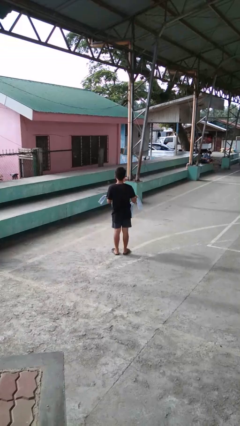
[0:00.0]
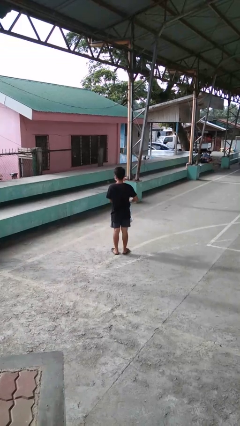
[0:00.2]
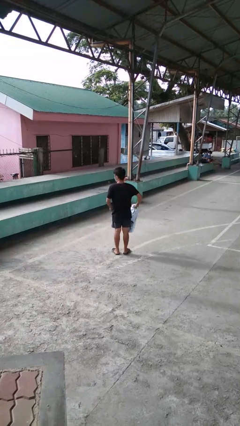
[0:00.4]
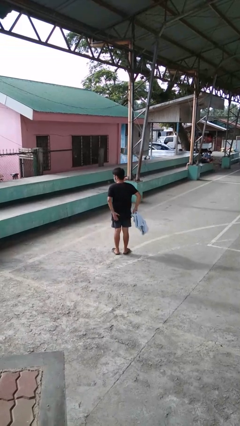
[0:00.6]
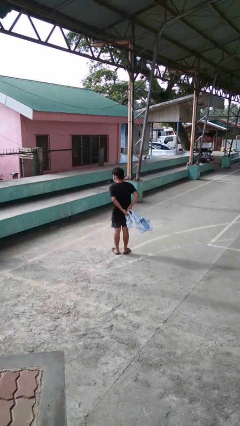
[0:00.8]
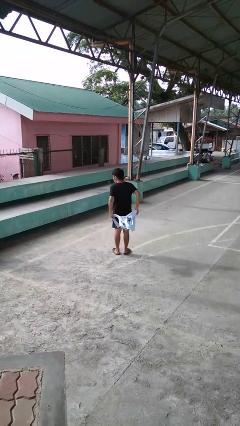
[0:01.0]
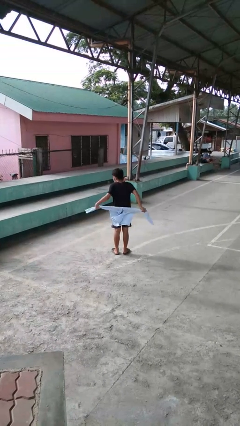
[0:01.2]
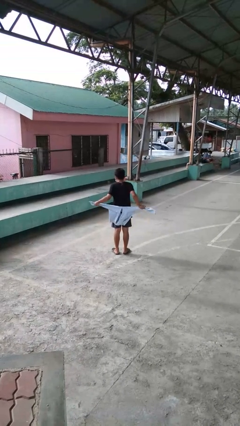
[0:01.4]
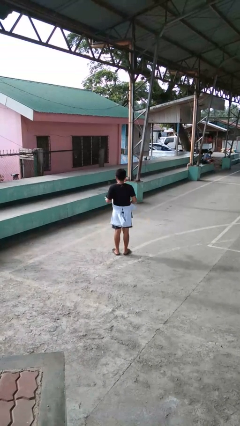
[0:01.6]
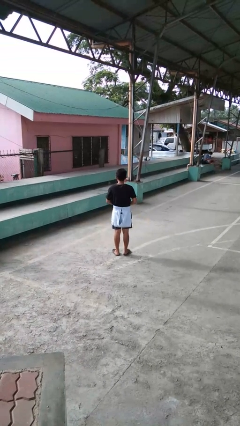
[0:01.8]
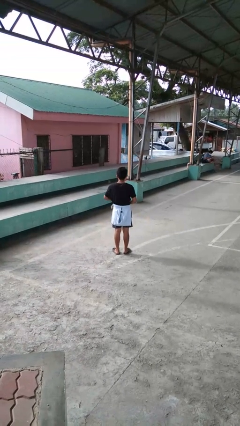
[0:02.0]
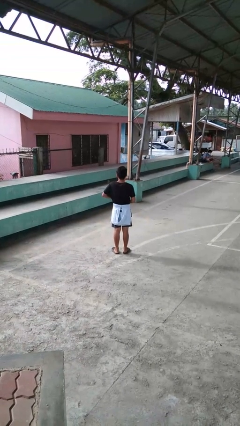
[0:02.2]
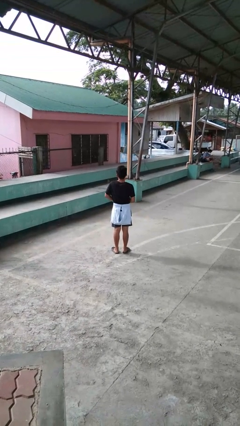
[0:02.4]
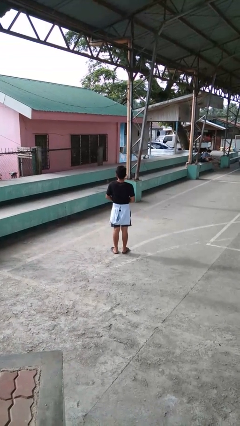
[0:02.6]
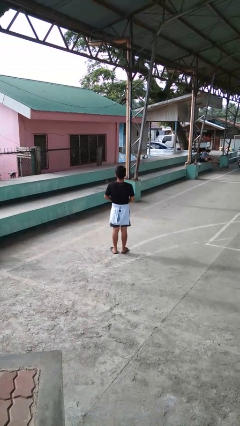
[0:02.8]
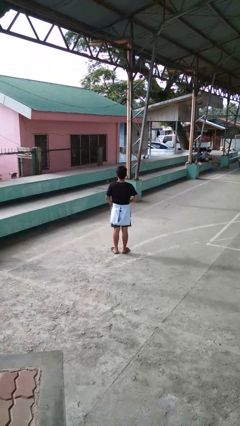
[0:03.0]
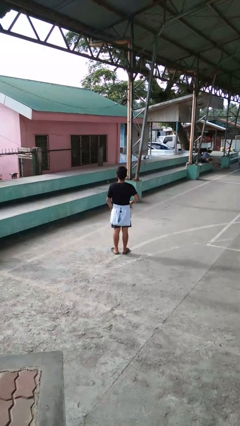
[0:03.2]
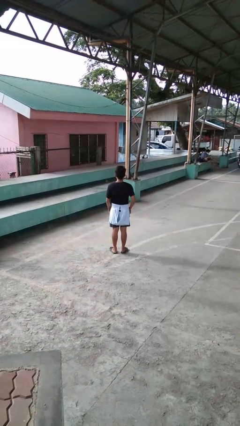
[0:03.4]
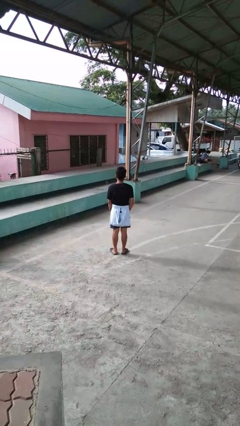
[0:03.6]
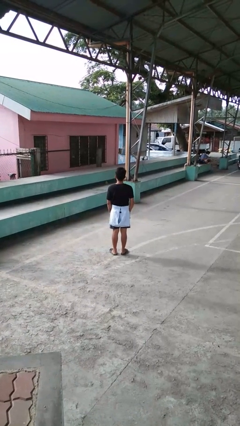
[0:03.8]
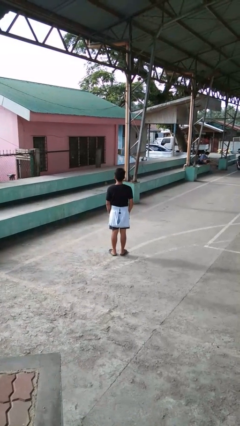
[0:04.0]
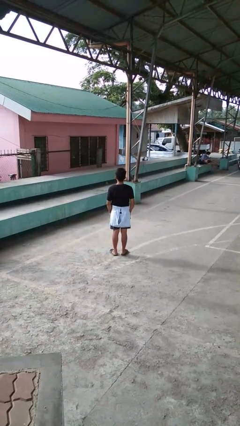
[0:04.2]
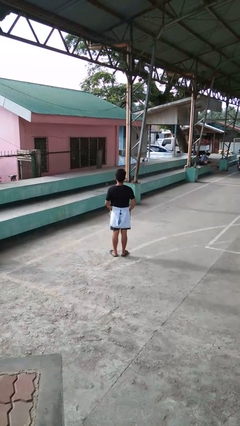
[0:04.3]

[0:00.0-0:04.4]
person ties jacket around waist

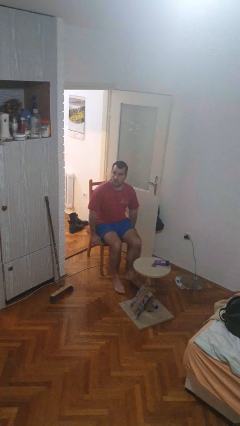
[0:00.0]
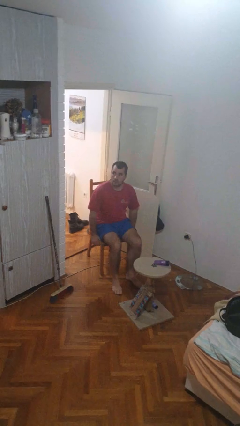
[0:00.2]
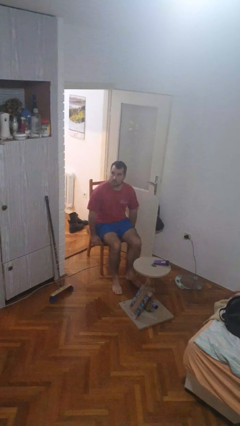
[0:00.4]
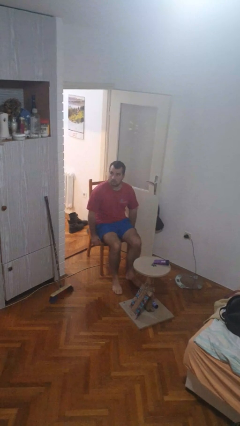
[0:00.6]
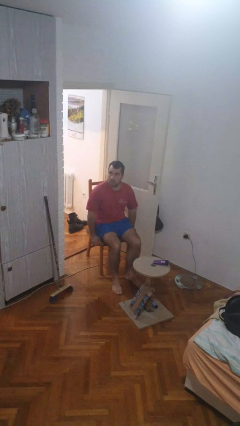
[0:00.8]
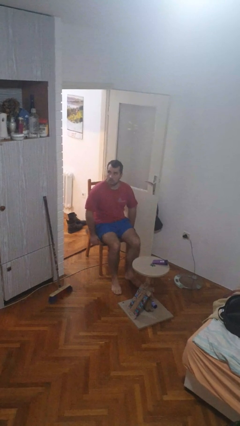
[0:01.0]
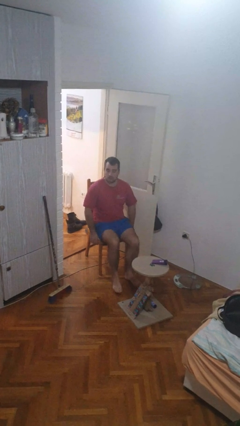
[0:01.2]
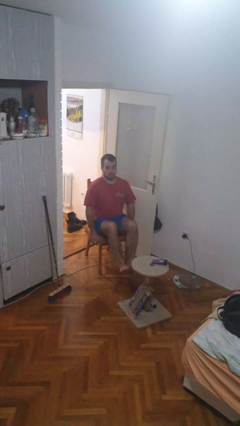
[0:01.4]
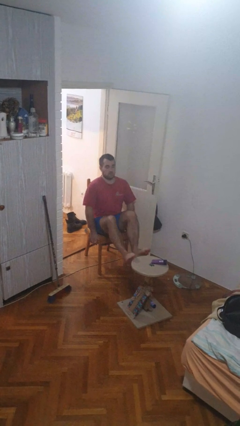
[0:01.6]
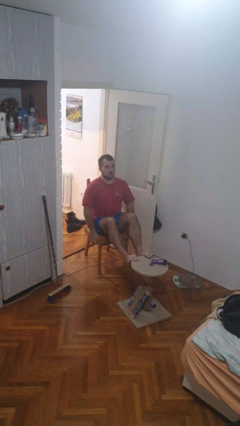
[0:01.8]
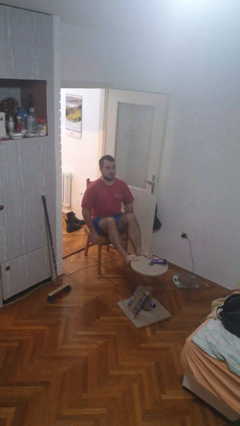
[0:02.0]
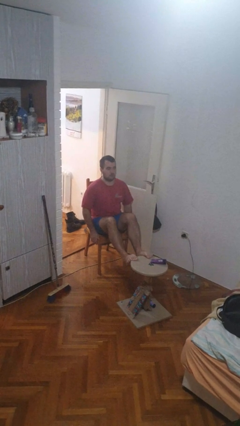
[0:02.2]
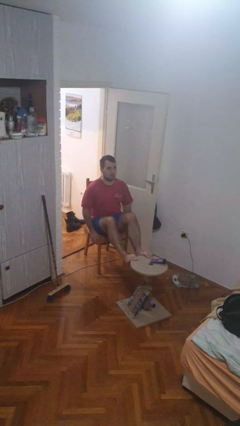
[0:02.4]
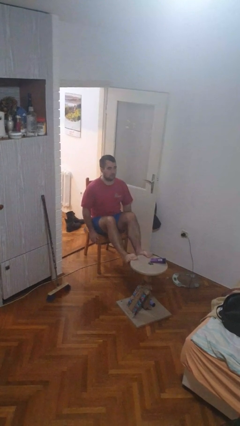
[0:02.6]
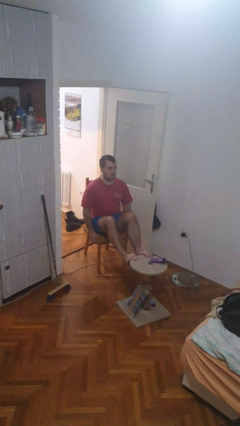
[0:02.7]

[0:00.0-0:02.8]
person puts feet up

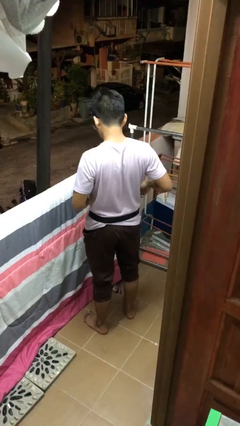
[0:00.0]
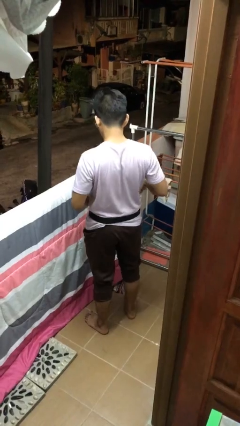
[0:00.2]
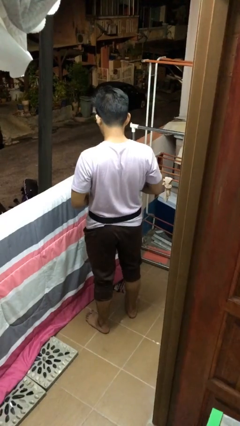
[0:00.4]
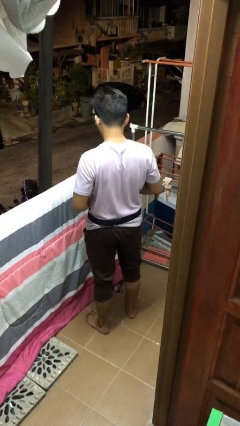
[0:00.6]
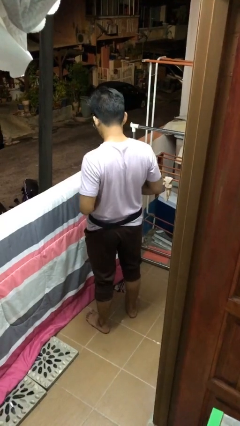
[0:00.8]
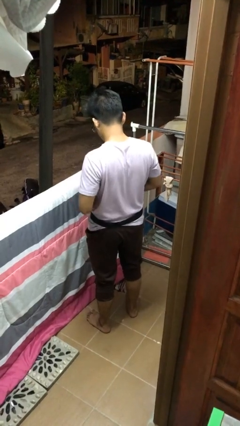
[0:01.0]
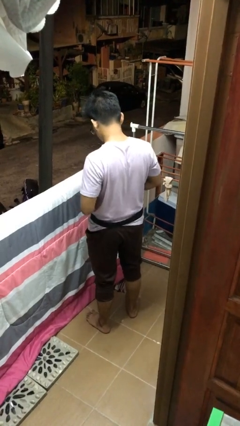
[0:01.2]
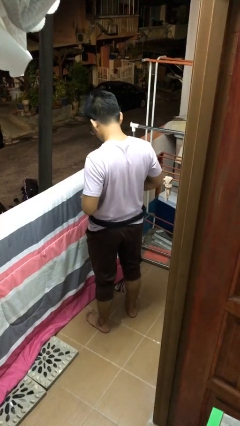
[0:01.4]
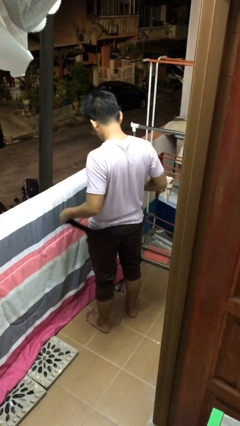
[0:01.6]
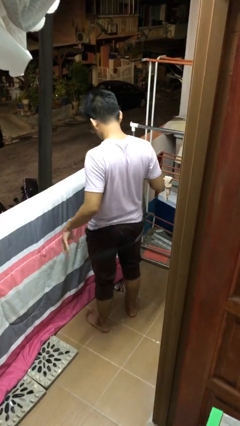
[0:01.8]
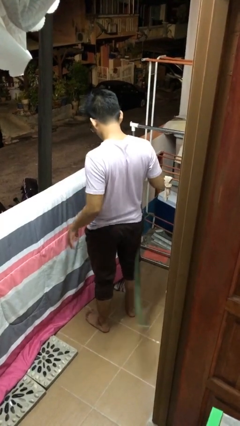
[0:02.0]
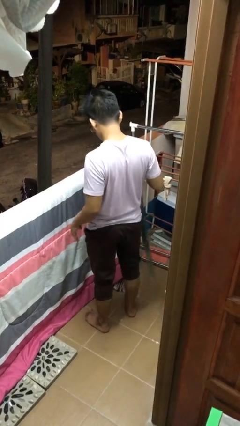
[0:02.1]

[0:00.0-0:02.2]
person takes off belt

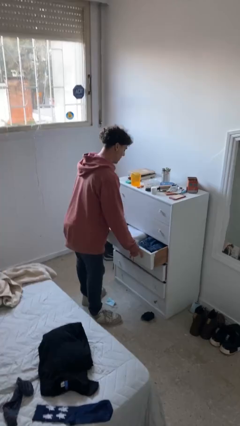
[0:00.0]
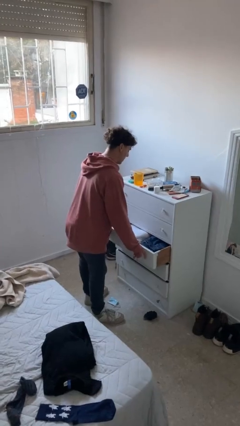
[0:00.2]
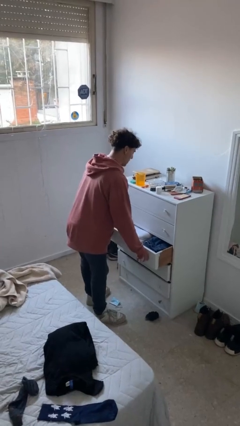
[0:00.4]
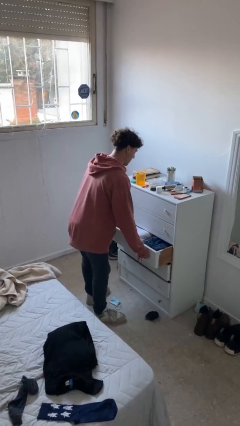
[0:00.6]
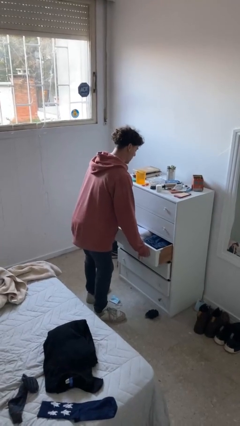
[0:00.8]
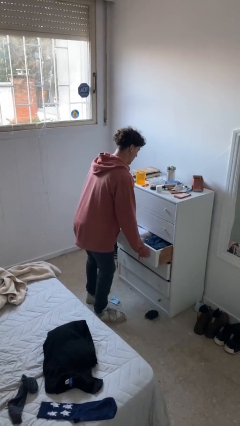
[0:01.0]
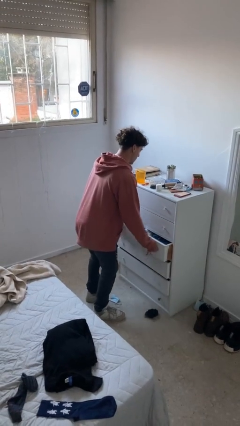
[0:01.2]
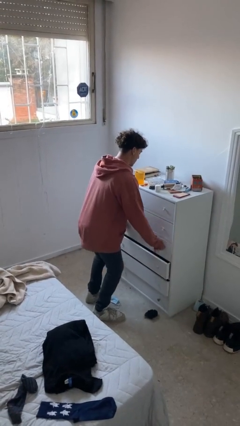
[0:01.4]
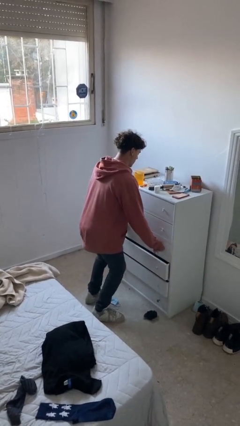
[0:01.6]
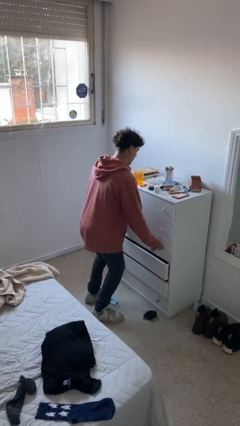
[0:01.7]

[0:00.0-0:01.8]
person closes dresser drawer

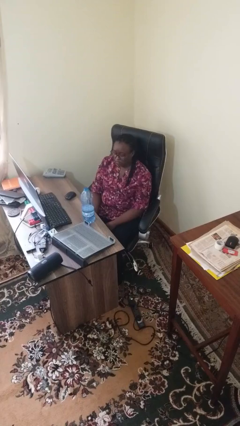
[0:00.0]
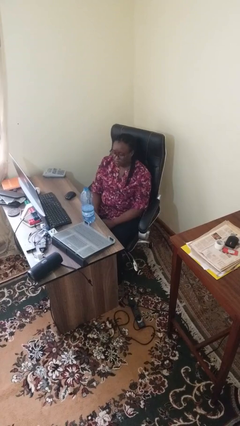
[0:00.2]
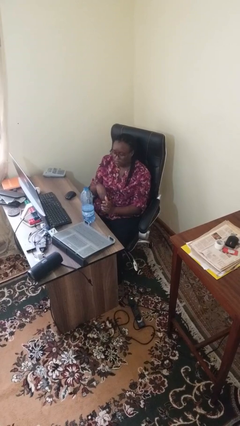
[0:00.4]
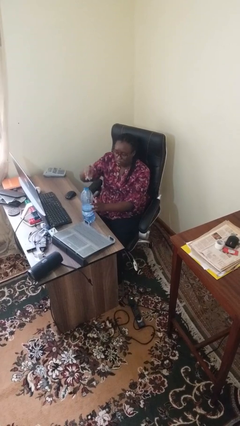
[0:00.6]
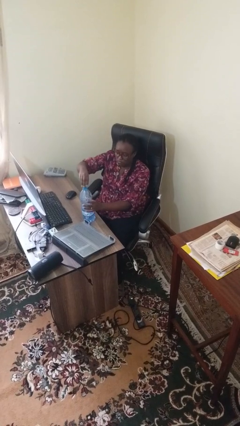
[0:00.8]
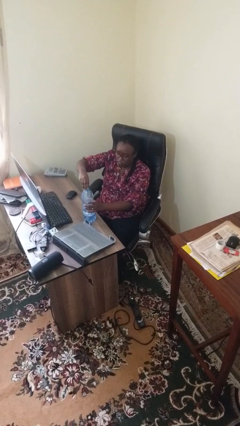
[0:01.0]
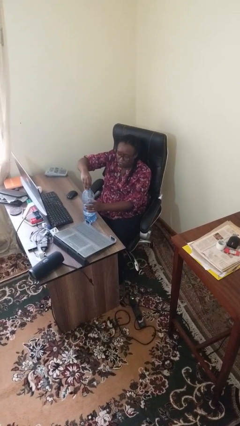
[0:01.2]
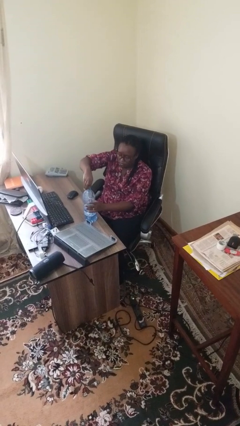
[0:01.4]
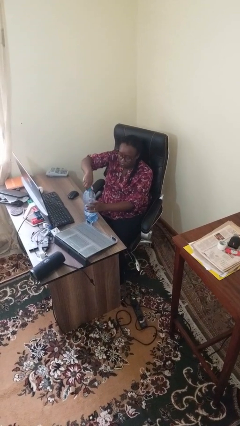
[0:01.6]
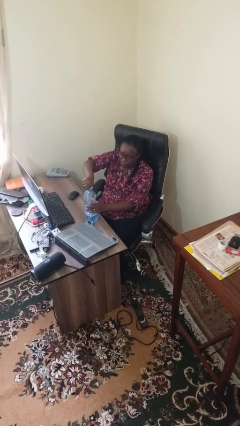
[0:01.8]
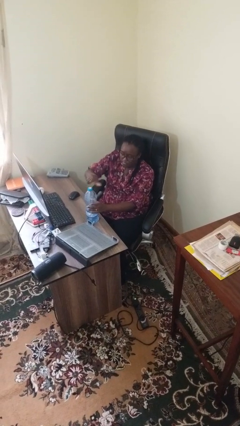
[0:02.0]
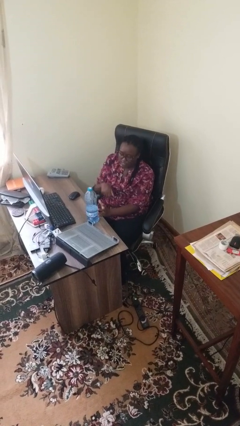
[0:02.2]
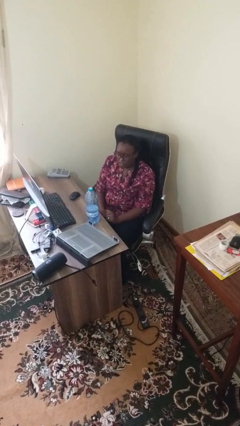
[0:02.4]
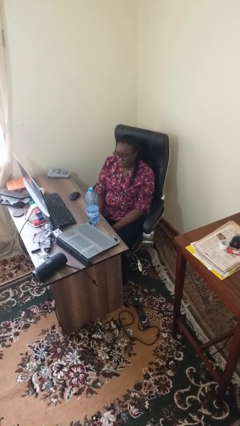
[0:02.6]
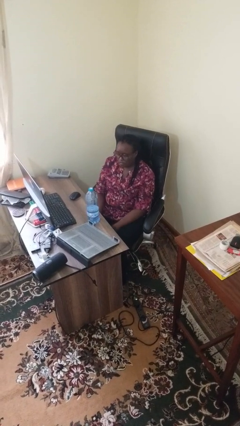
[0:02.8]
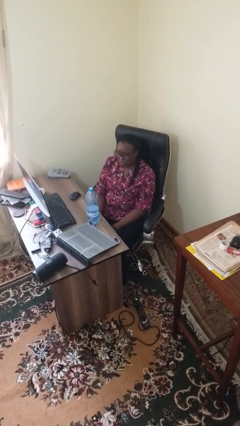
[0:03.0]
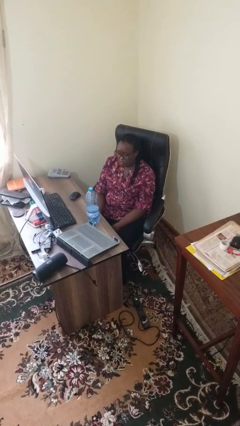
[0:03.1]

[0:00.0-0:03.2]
person screws lid to bottle

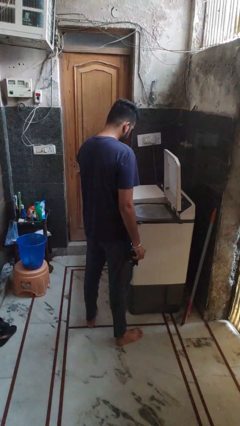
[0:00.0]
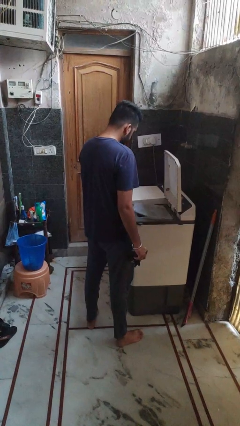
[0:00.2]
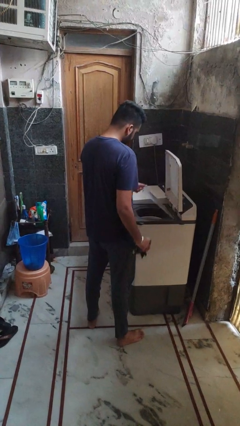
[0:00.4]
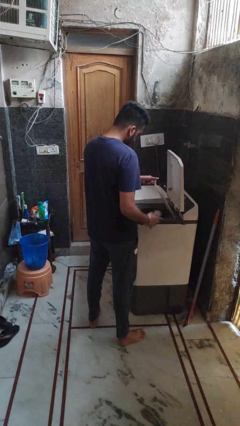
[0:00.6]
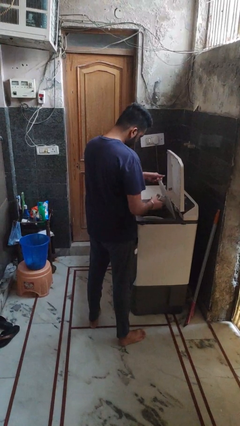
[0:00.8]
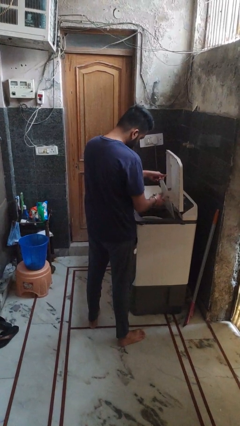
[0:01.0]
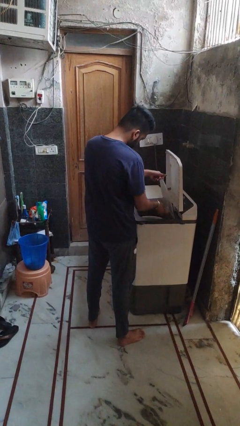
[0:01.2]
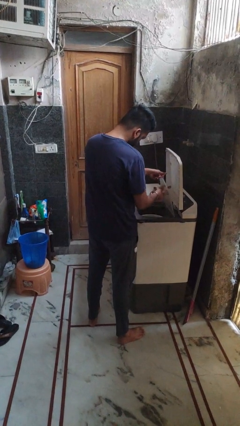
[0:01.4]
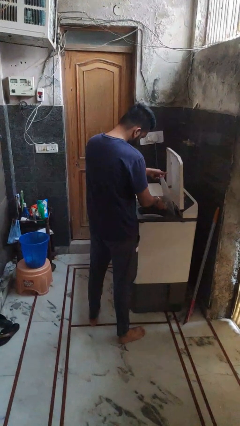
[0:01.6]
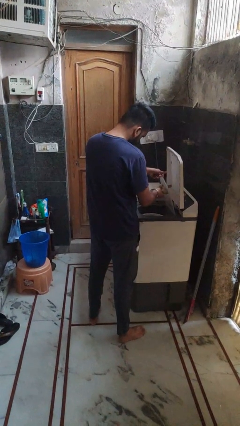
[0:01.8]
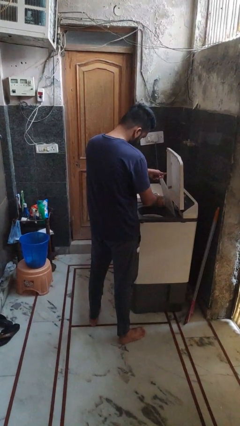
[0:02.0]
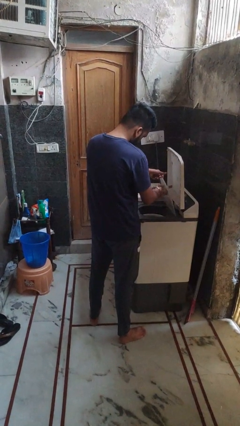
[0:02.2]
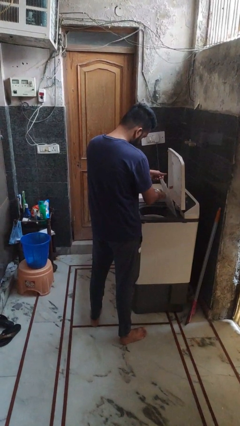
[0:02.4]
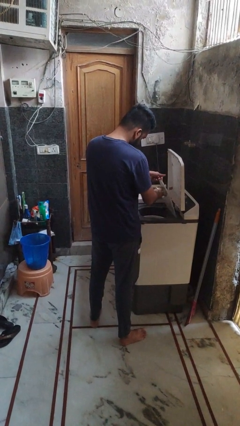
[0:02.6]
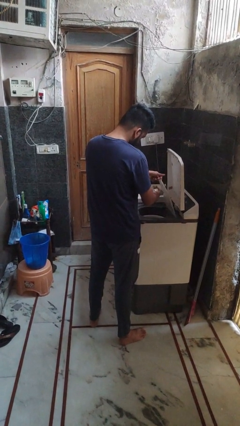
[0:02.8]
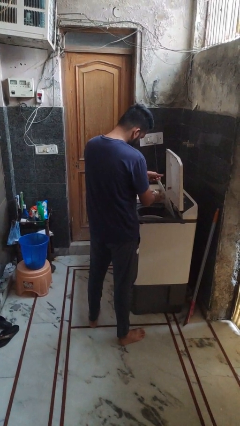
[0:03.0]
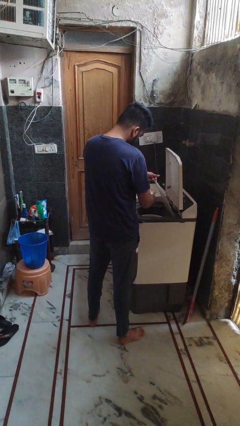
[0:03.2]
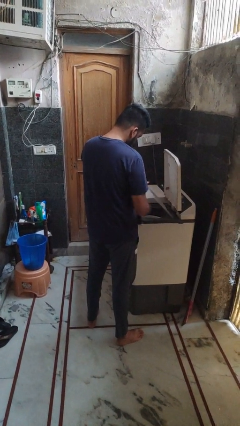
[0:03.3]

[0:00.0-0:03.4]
person cleans dryer lint trap
